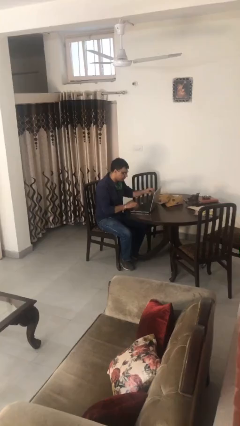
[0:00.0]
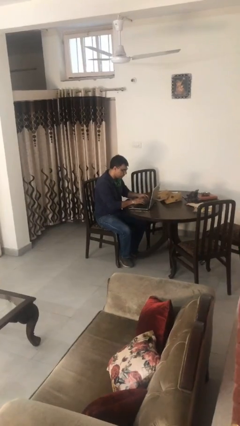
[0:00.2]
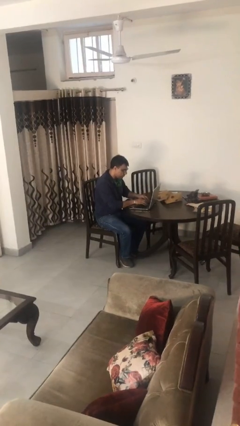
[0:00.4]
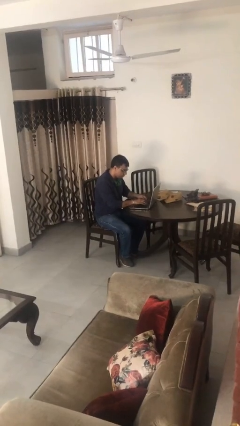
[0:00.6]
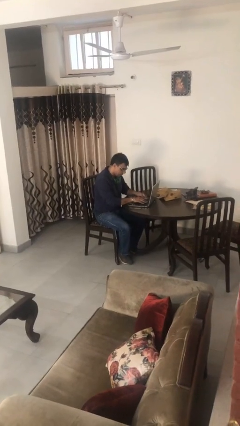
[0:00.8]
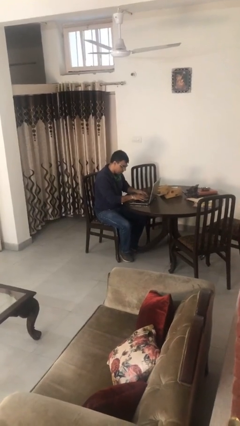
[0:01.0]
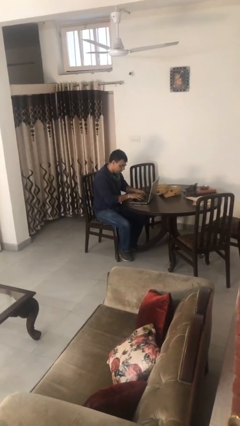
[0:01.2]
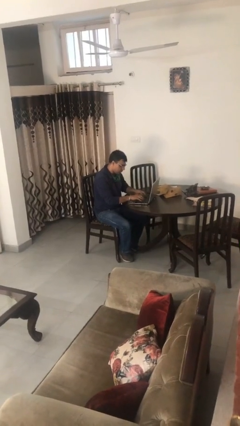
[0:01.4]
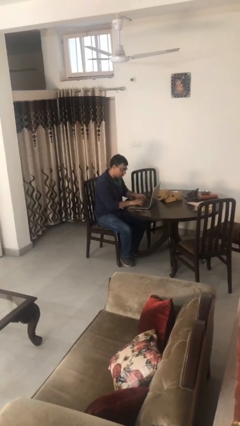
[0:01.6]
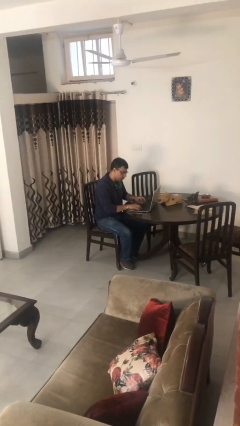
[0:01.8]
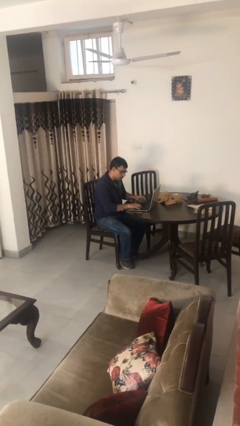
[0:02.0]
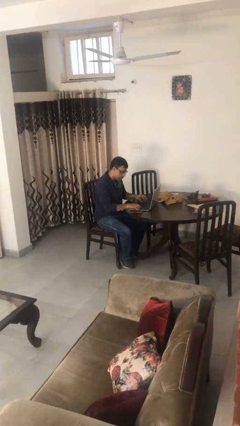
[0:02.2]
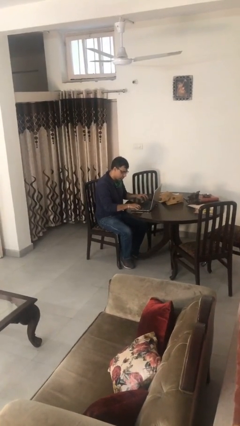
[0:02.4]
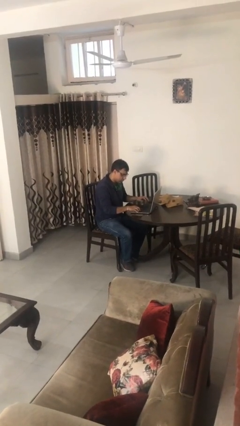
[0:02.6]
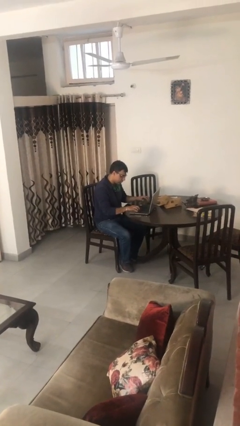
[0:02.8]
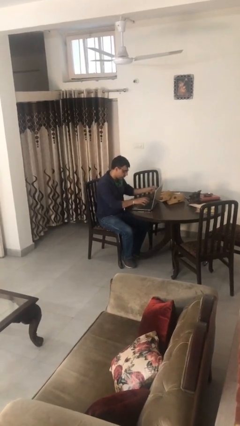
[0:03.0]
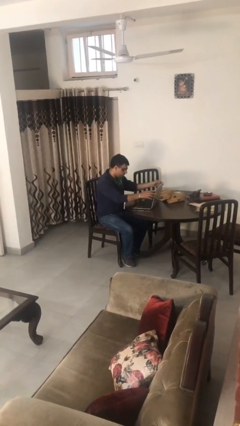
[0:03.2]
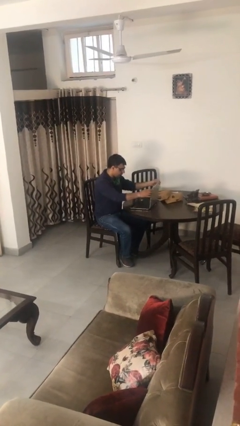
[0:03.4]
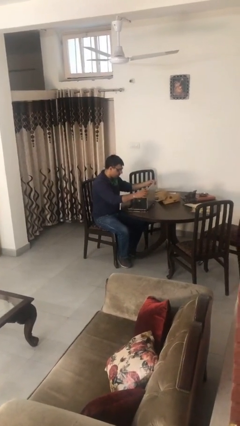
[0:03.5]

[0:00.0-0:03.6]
person interacts with laptop

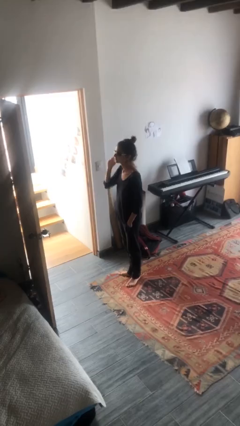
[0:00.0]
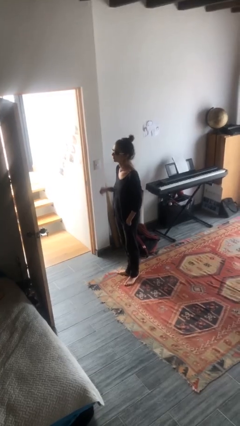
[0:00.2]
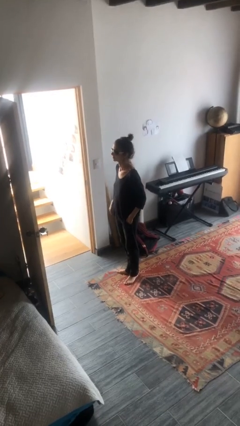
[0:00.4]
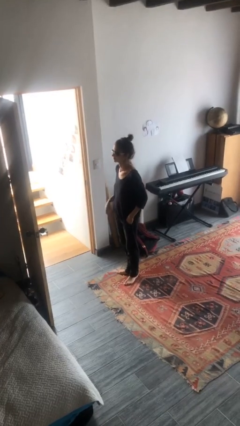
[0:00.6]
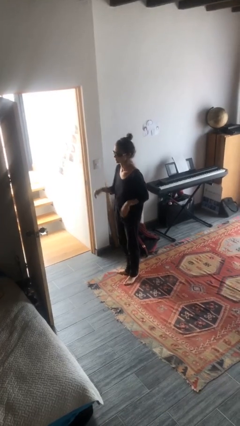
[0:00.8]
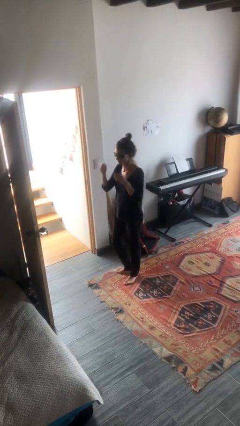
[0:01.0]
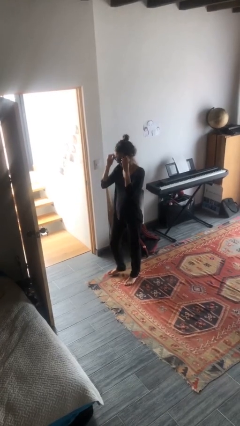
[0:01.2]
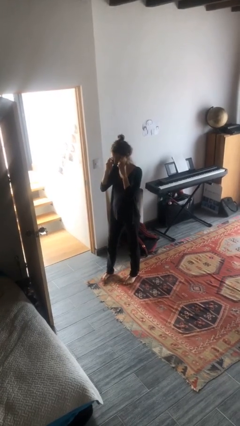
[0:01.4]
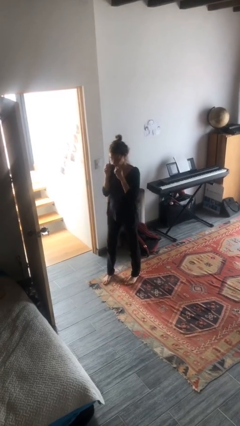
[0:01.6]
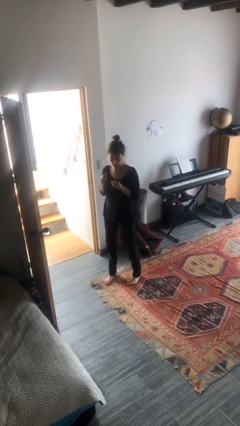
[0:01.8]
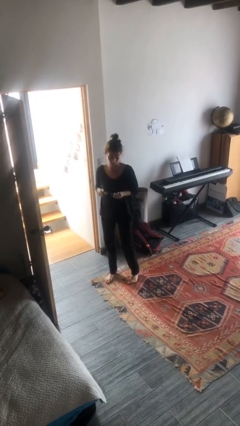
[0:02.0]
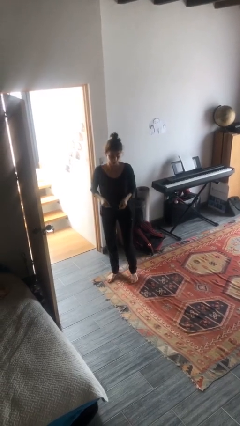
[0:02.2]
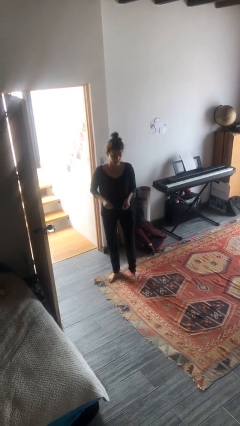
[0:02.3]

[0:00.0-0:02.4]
person takes off sunglasses

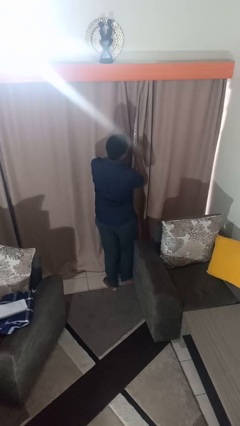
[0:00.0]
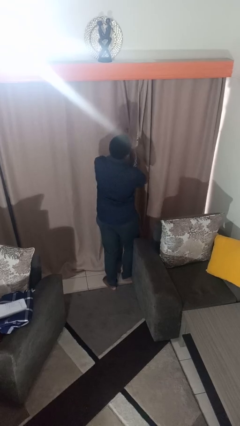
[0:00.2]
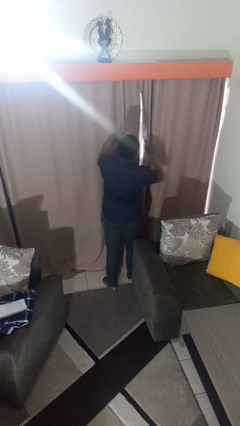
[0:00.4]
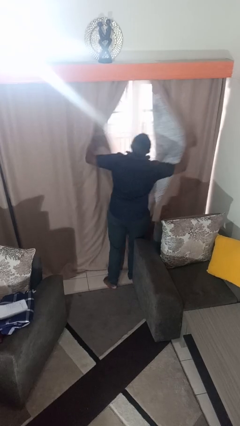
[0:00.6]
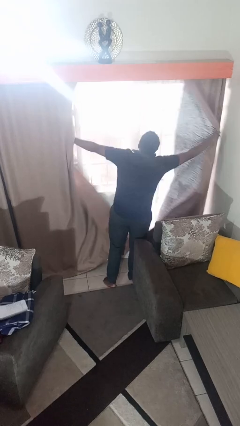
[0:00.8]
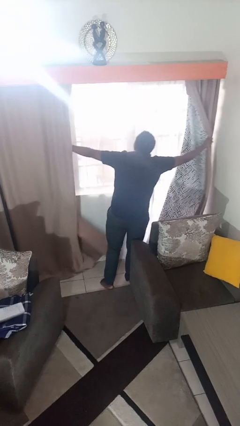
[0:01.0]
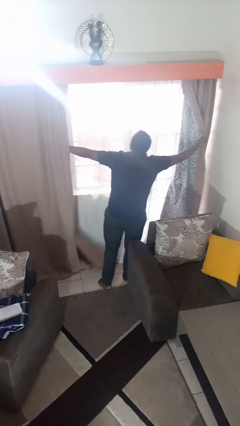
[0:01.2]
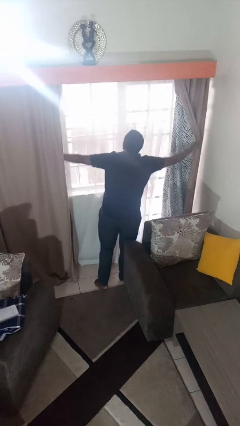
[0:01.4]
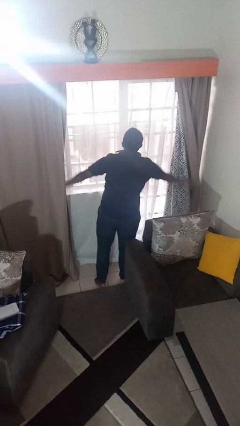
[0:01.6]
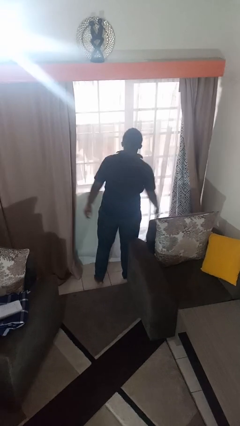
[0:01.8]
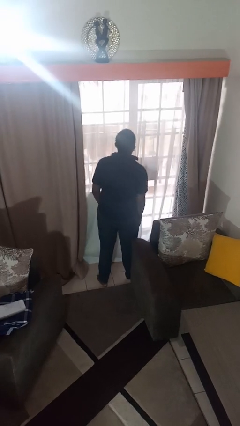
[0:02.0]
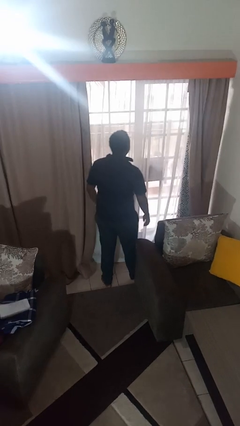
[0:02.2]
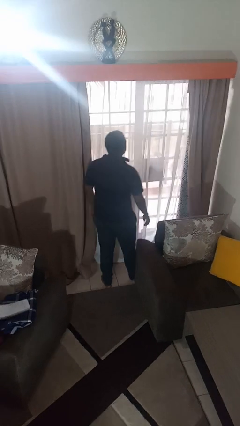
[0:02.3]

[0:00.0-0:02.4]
person opens curtains

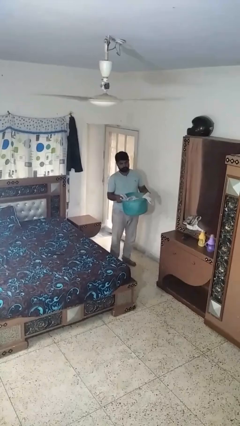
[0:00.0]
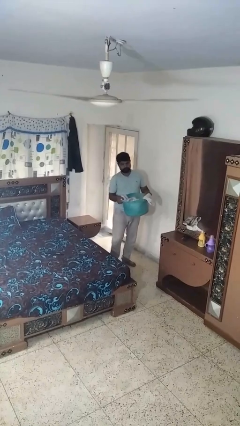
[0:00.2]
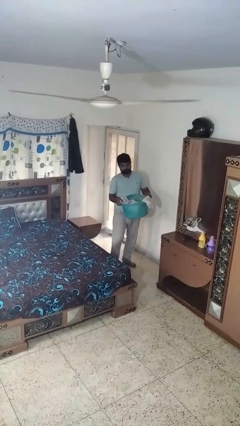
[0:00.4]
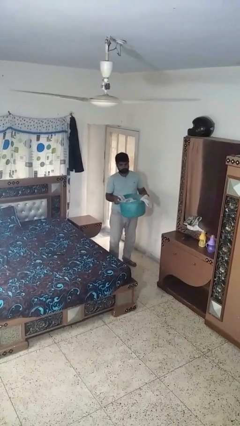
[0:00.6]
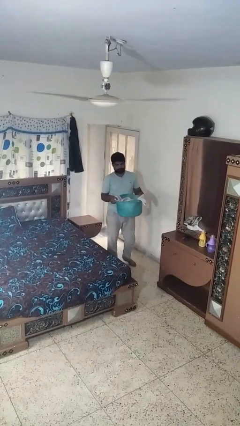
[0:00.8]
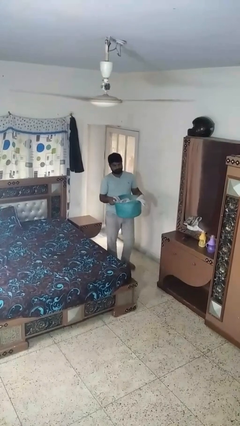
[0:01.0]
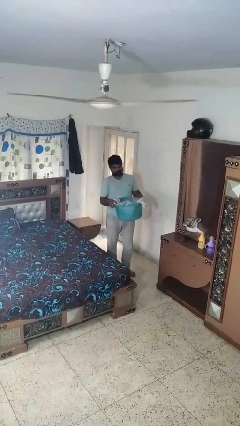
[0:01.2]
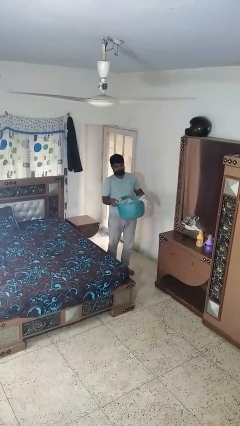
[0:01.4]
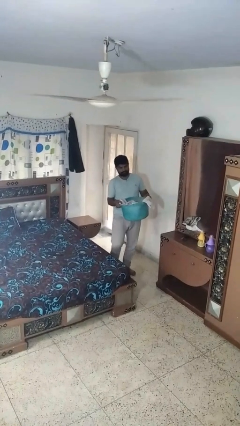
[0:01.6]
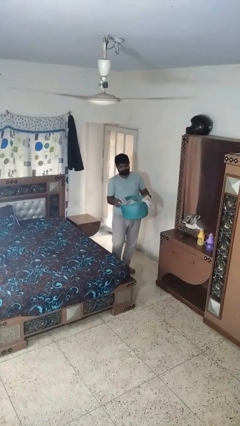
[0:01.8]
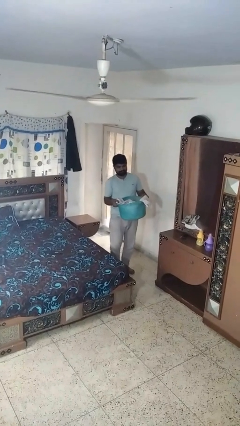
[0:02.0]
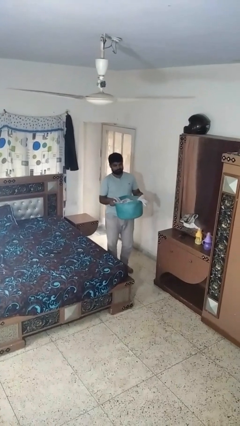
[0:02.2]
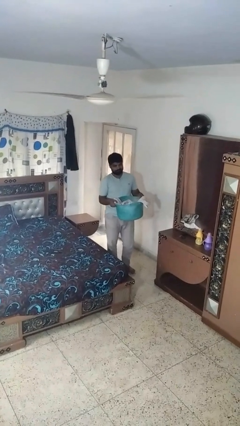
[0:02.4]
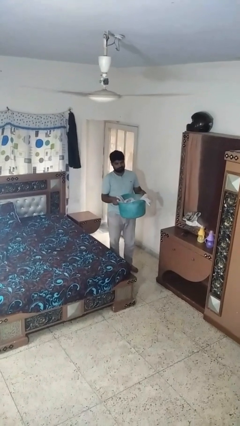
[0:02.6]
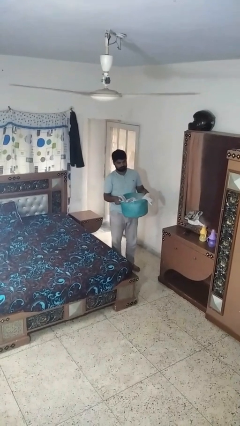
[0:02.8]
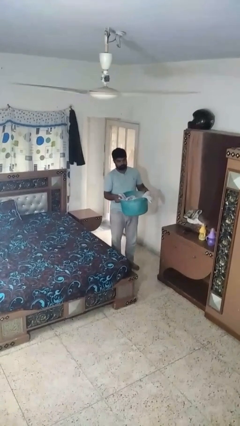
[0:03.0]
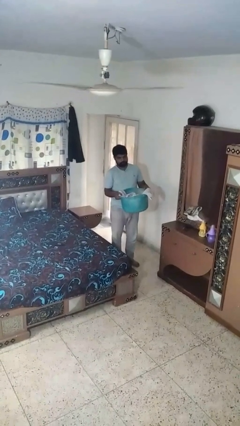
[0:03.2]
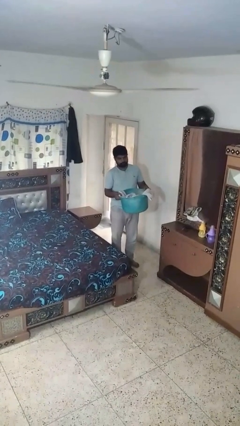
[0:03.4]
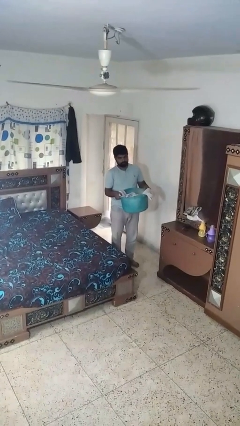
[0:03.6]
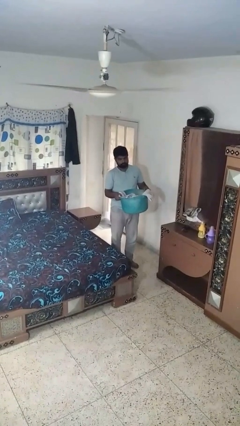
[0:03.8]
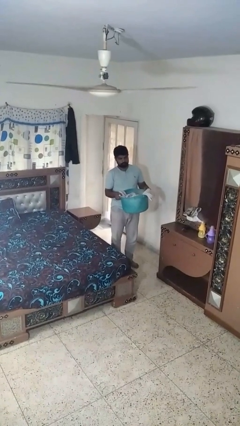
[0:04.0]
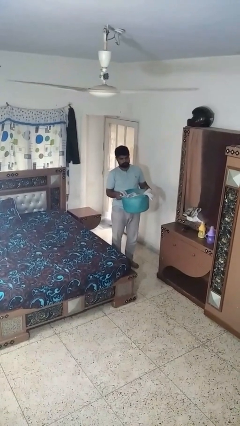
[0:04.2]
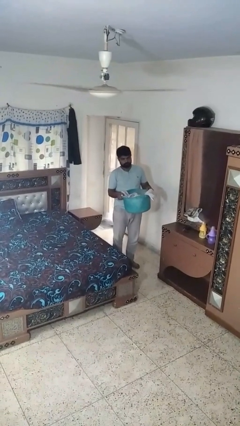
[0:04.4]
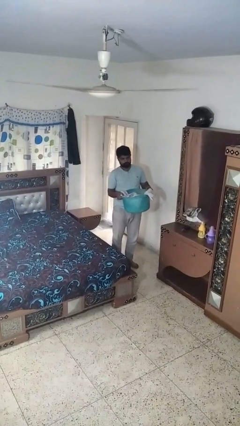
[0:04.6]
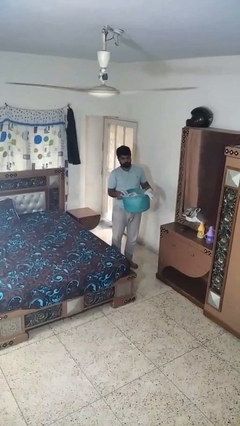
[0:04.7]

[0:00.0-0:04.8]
person carries laundry basket

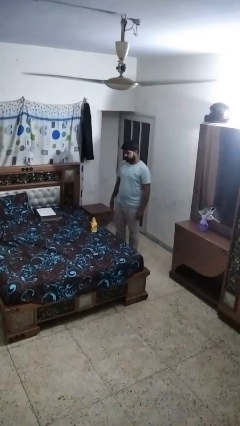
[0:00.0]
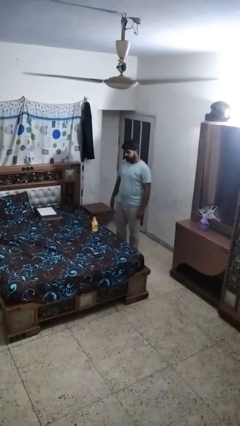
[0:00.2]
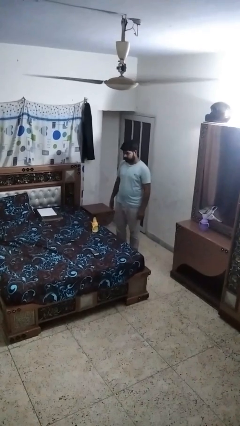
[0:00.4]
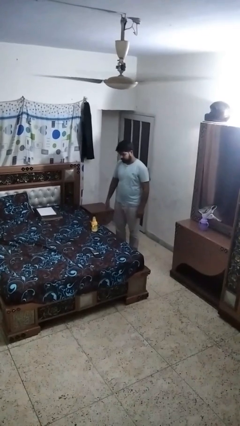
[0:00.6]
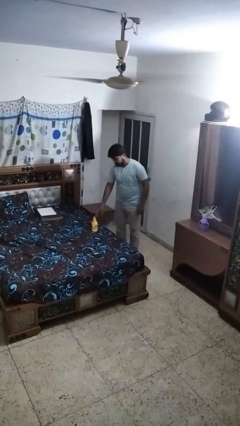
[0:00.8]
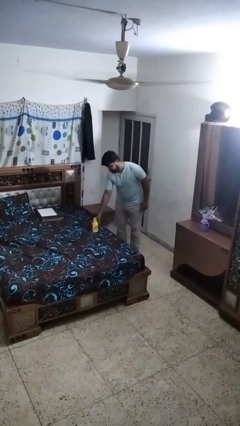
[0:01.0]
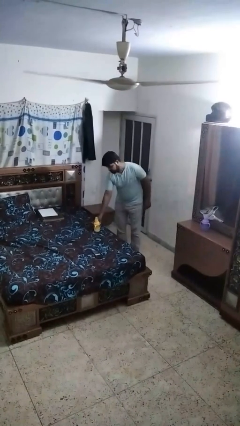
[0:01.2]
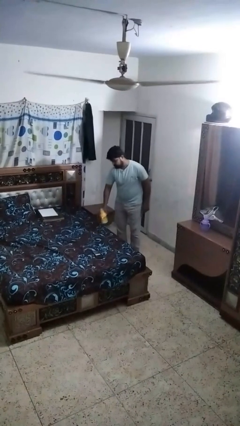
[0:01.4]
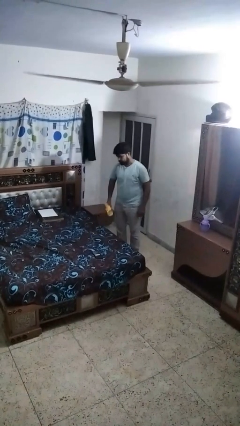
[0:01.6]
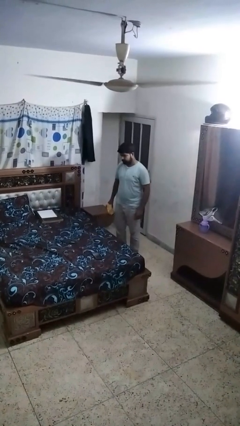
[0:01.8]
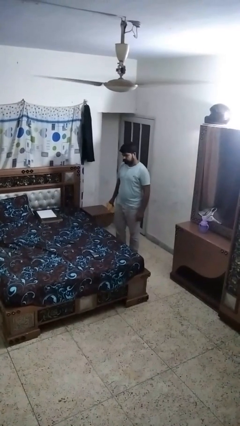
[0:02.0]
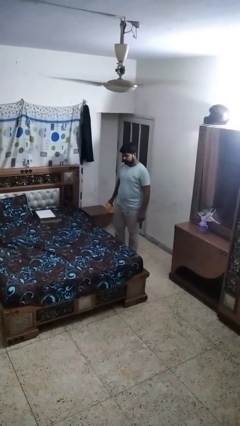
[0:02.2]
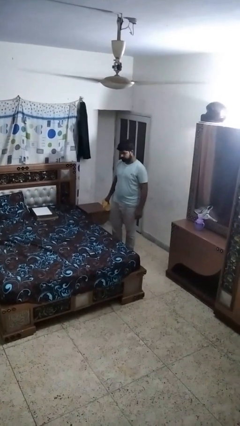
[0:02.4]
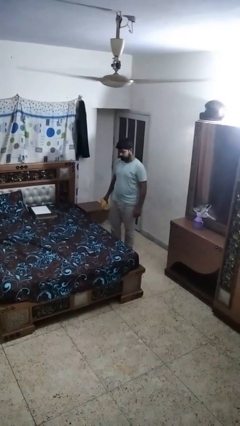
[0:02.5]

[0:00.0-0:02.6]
person picks up object from bed

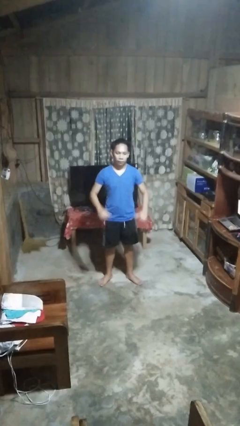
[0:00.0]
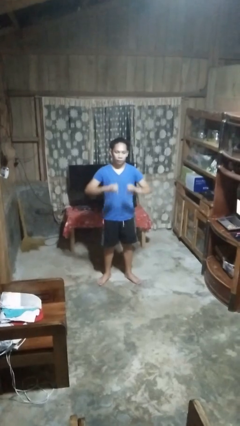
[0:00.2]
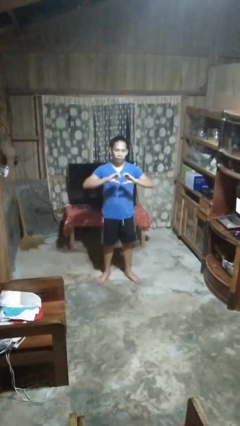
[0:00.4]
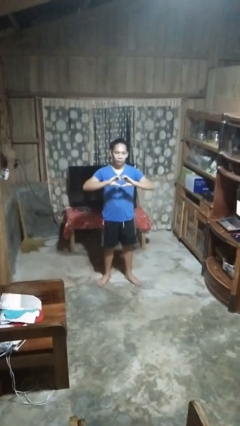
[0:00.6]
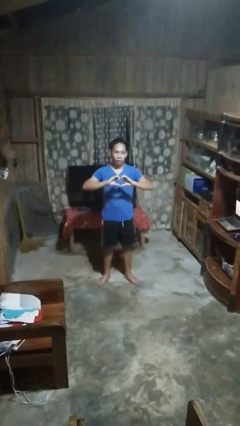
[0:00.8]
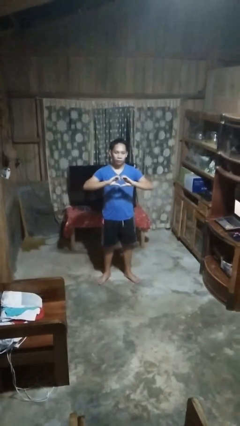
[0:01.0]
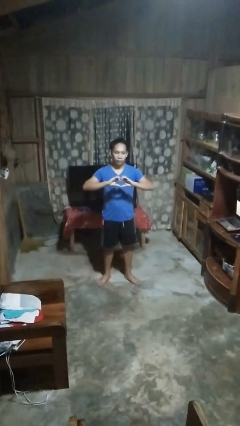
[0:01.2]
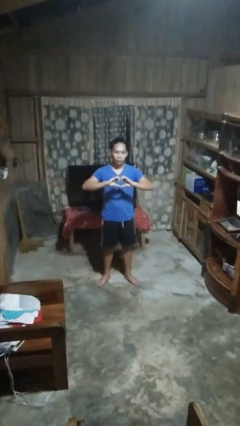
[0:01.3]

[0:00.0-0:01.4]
person gestures heart

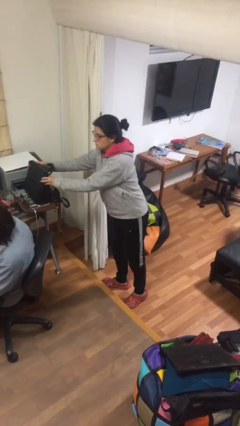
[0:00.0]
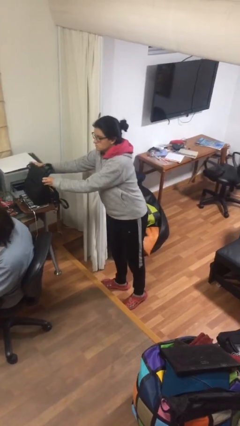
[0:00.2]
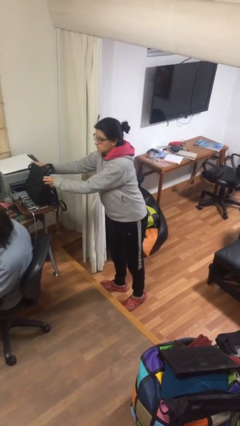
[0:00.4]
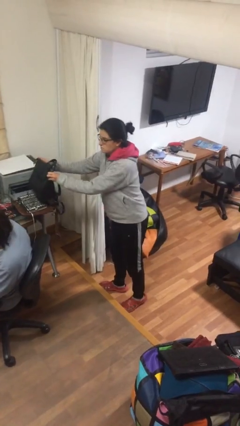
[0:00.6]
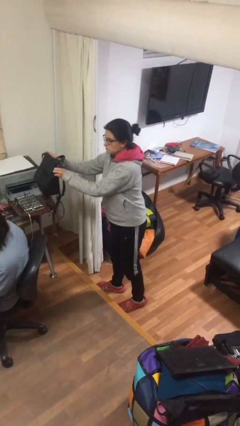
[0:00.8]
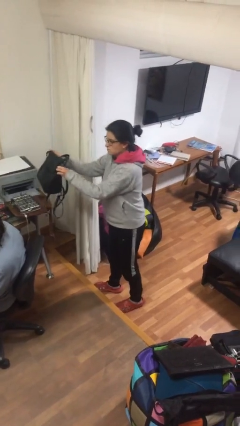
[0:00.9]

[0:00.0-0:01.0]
person steals object from person
